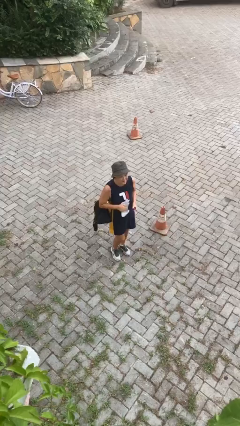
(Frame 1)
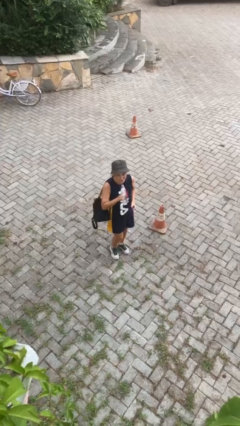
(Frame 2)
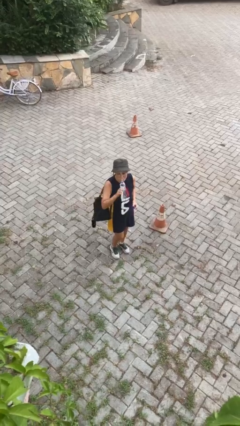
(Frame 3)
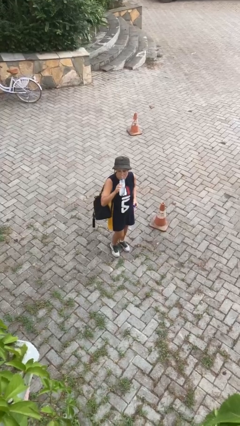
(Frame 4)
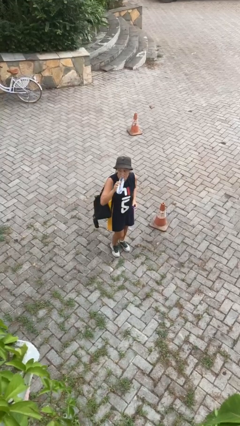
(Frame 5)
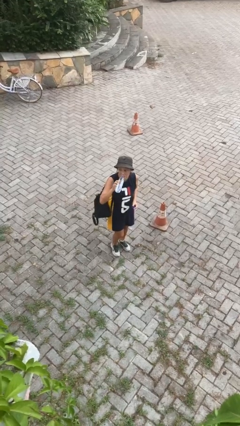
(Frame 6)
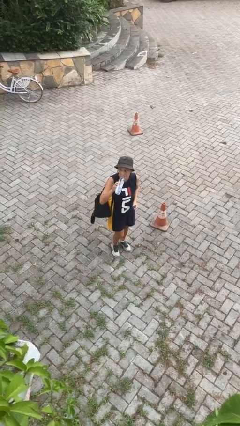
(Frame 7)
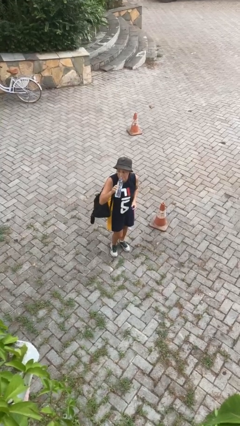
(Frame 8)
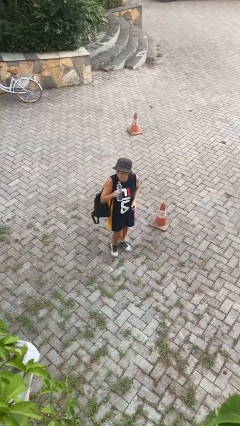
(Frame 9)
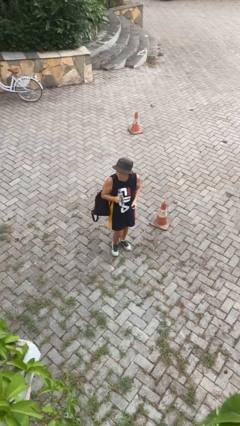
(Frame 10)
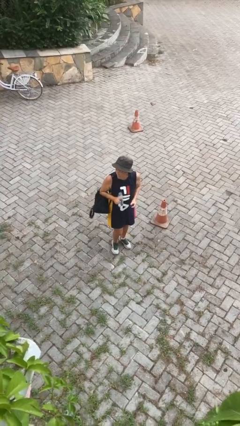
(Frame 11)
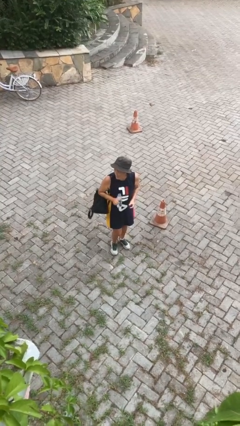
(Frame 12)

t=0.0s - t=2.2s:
person drinks from bottle

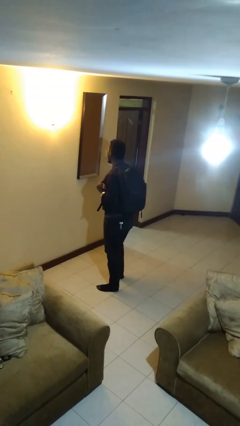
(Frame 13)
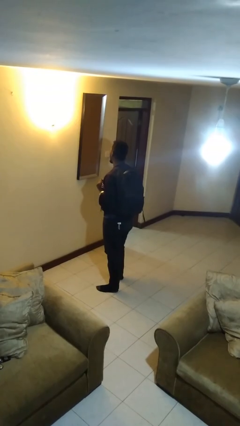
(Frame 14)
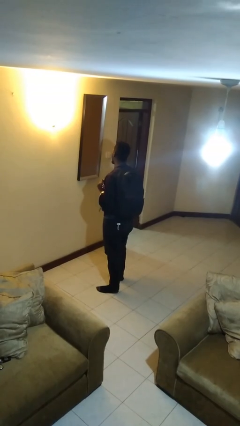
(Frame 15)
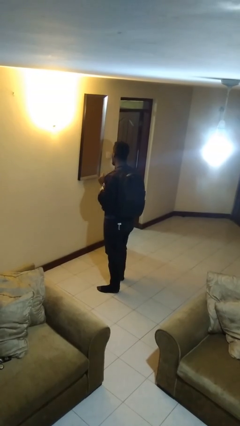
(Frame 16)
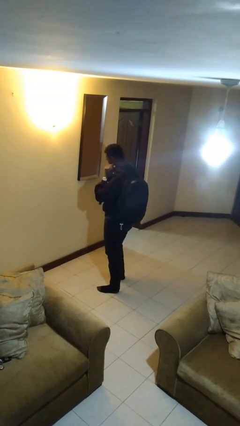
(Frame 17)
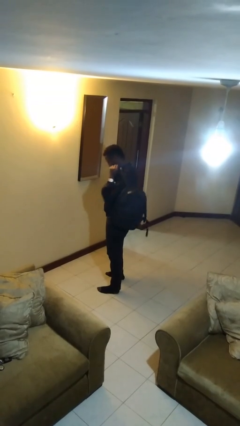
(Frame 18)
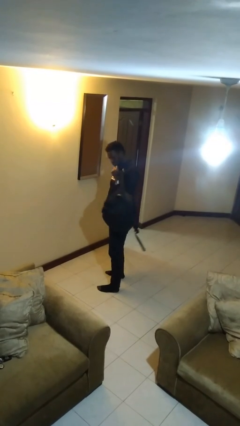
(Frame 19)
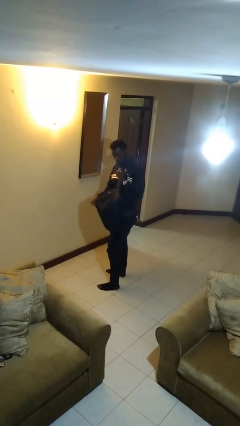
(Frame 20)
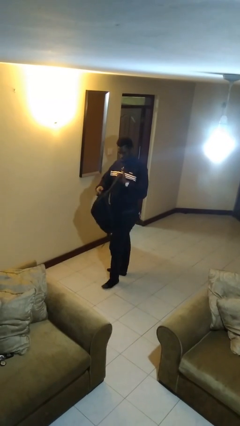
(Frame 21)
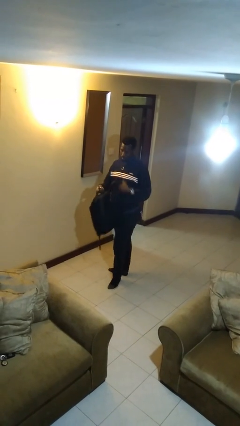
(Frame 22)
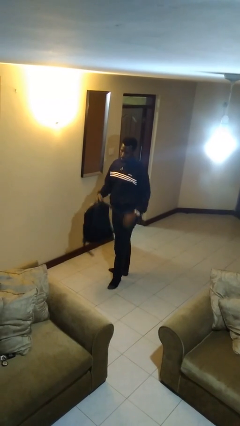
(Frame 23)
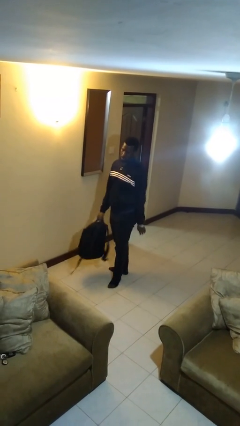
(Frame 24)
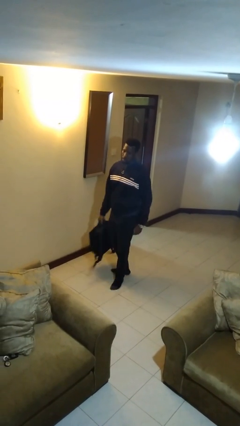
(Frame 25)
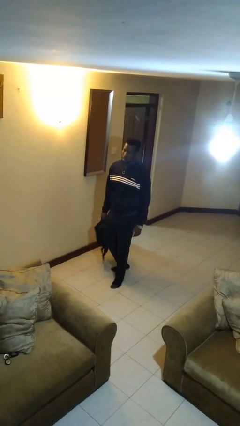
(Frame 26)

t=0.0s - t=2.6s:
person takes off backpack

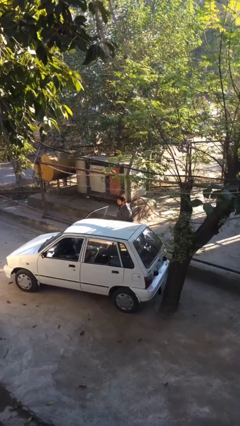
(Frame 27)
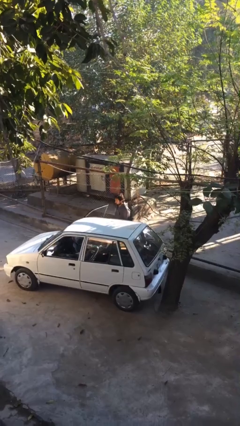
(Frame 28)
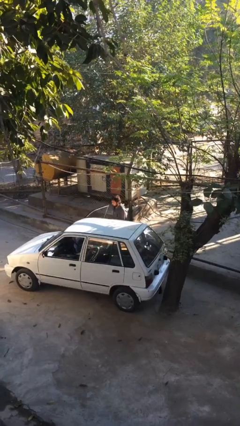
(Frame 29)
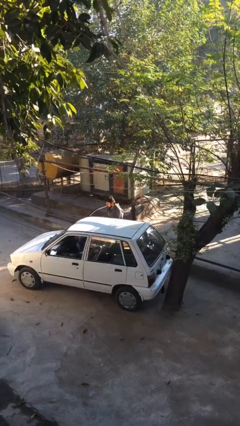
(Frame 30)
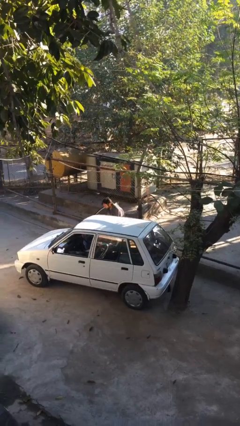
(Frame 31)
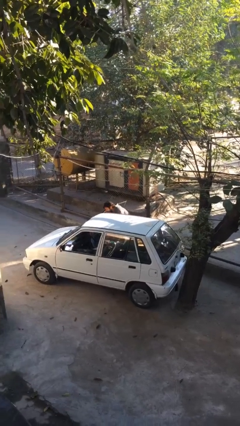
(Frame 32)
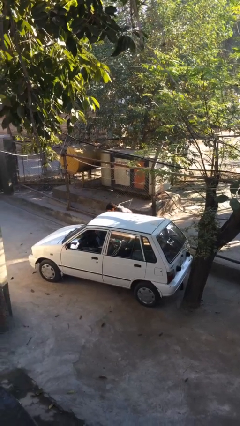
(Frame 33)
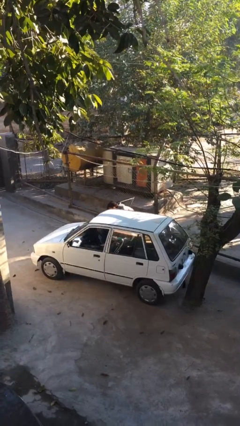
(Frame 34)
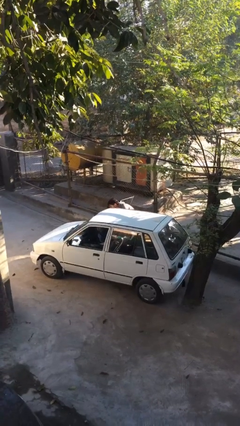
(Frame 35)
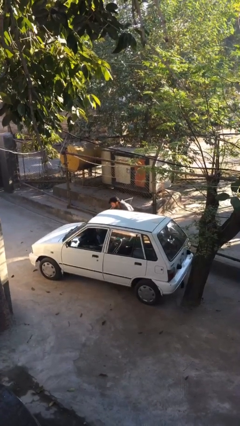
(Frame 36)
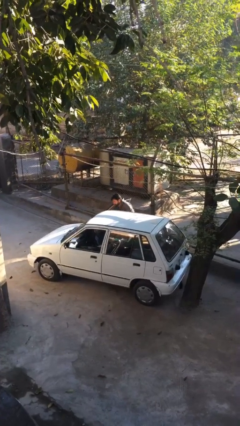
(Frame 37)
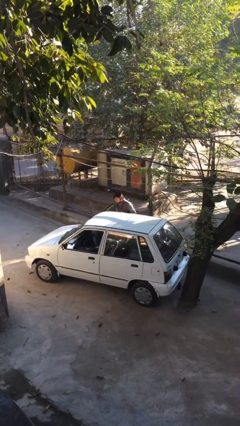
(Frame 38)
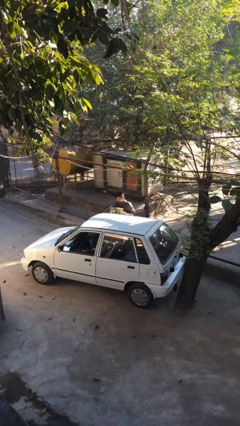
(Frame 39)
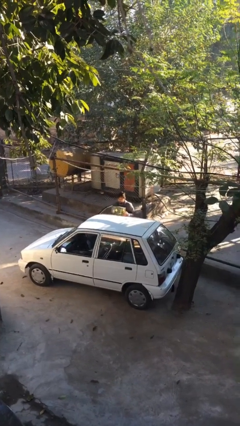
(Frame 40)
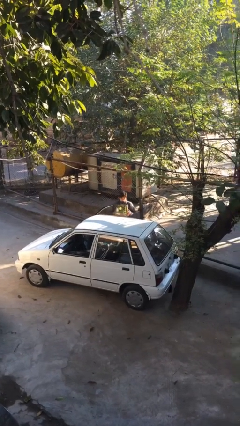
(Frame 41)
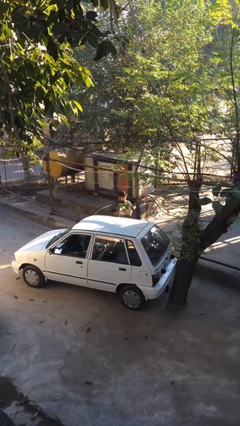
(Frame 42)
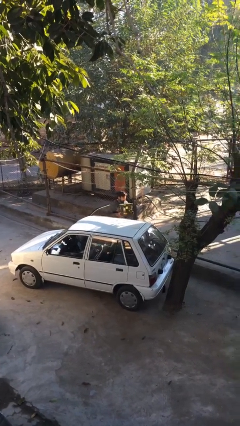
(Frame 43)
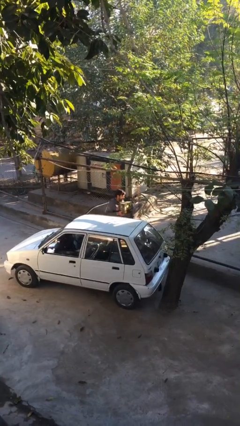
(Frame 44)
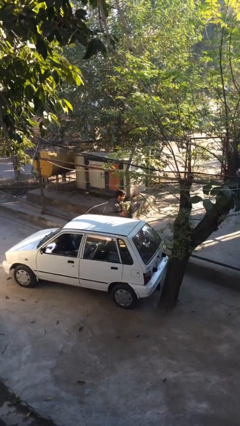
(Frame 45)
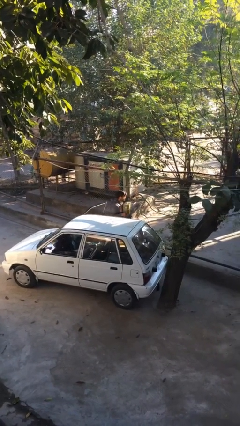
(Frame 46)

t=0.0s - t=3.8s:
person unloads car

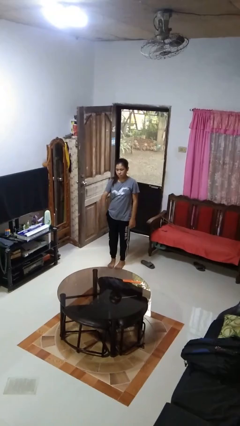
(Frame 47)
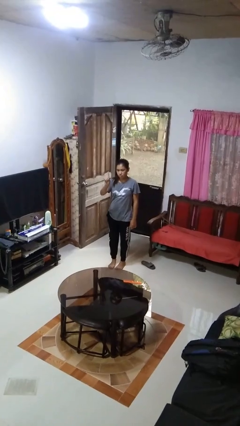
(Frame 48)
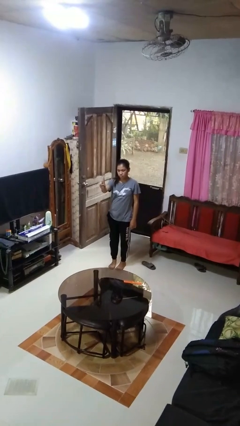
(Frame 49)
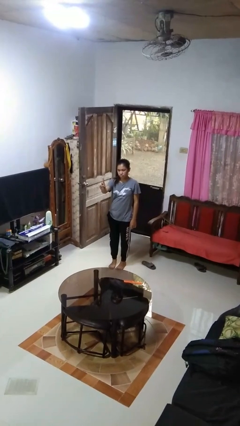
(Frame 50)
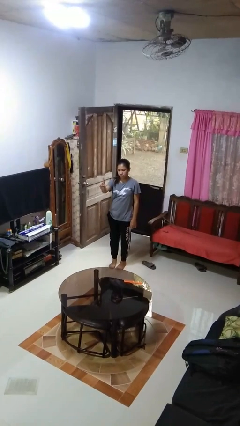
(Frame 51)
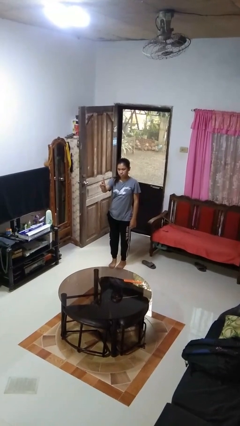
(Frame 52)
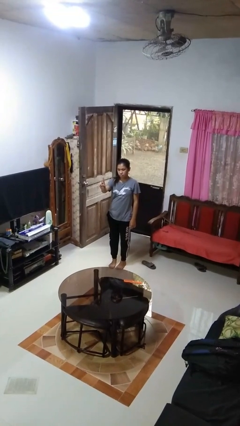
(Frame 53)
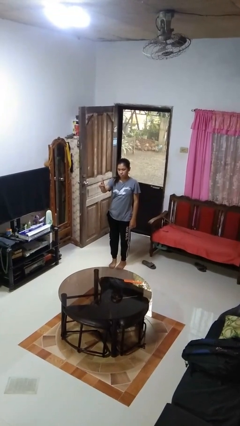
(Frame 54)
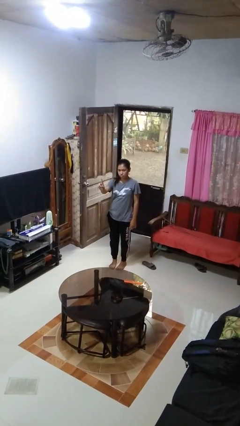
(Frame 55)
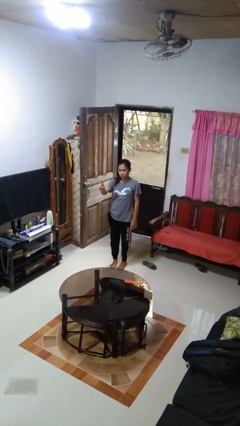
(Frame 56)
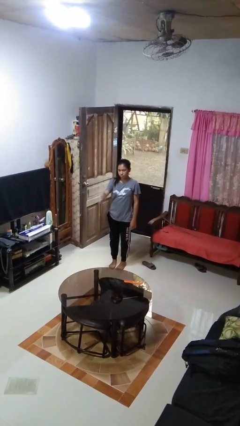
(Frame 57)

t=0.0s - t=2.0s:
person gestures number one

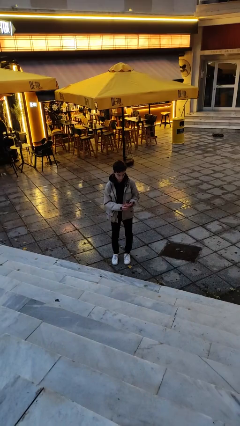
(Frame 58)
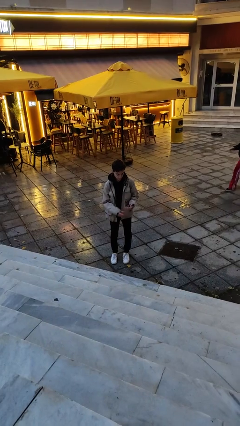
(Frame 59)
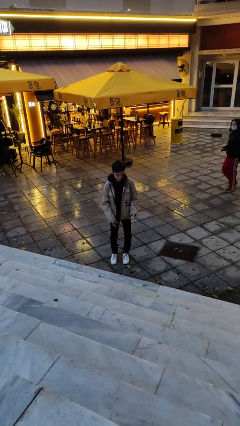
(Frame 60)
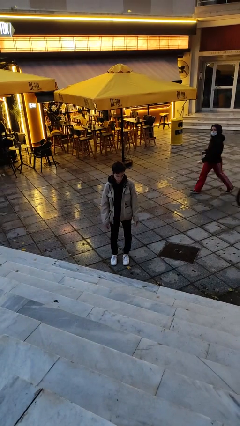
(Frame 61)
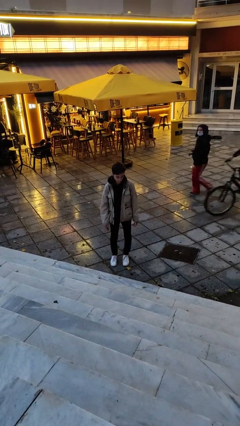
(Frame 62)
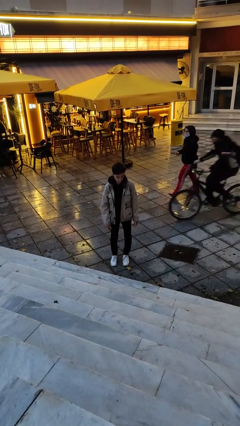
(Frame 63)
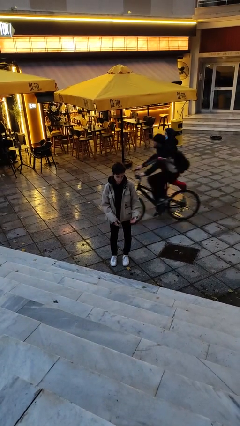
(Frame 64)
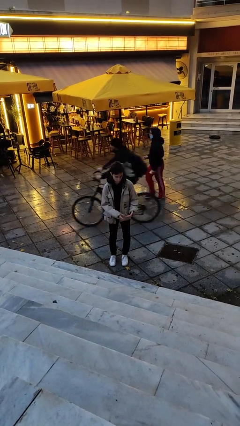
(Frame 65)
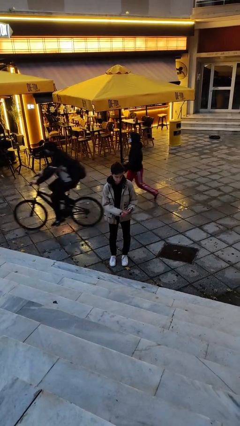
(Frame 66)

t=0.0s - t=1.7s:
person puts on ring

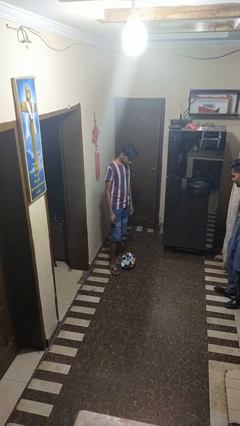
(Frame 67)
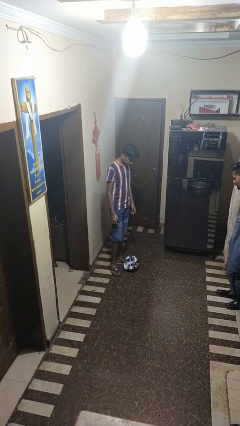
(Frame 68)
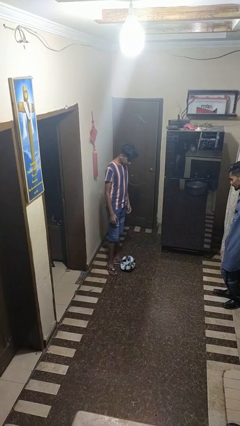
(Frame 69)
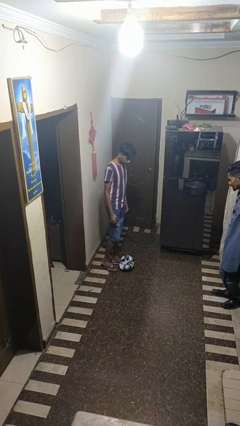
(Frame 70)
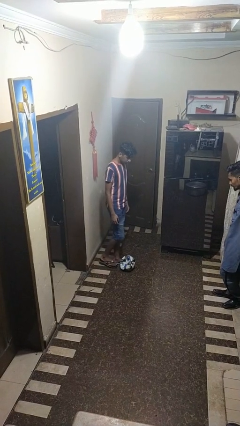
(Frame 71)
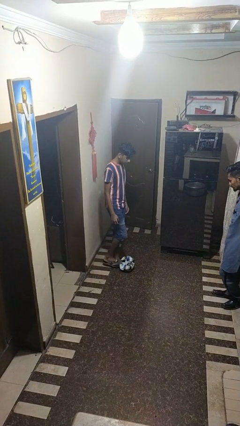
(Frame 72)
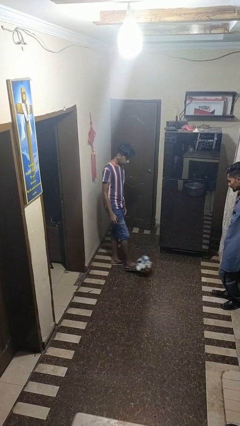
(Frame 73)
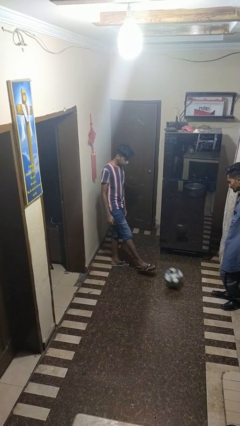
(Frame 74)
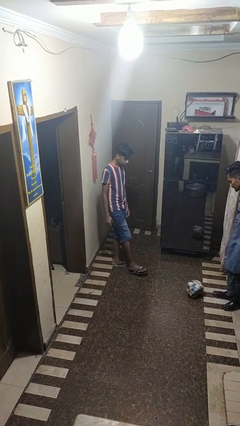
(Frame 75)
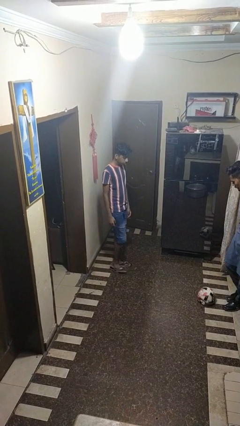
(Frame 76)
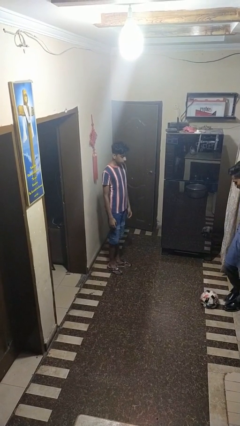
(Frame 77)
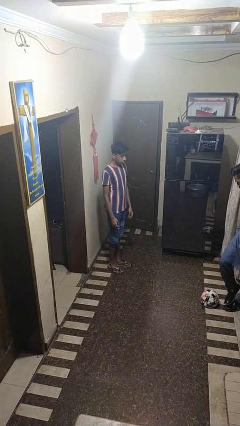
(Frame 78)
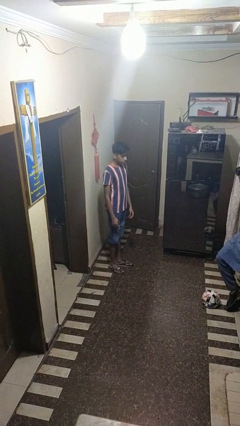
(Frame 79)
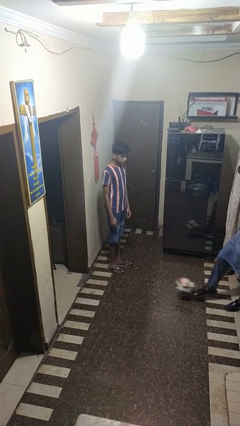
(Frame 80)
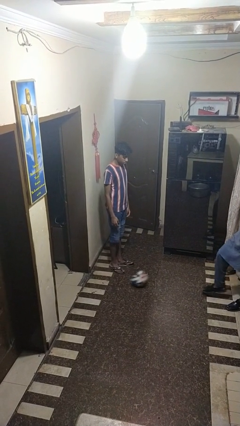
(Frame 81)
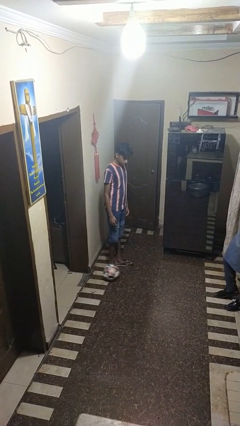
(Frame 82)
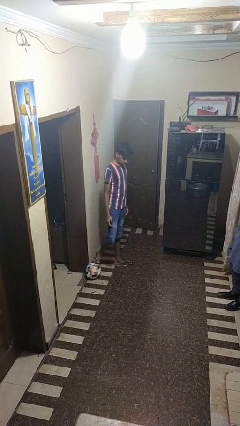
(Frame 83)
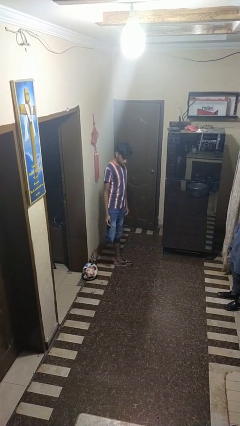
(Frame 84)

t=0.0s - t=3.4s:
person kicks object to person

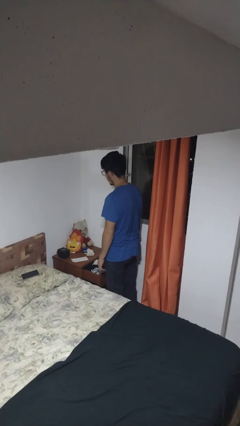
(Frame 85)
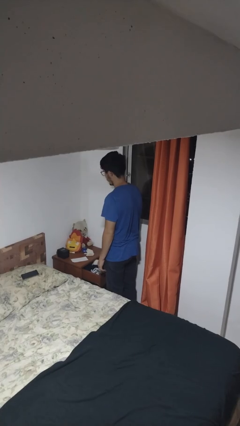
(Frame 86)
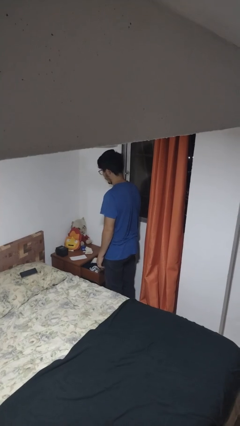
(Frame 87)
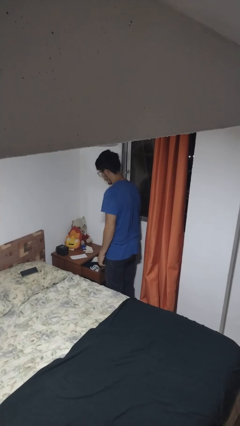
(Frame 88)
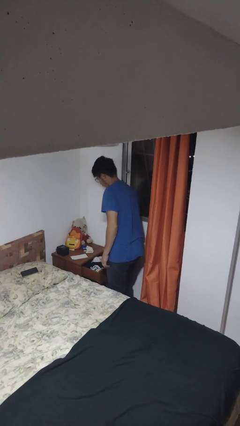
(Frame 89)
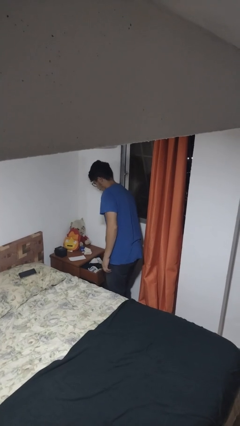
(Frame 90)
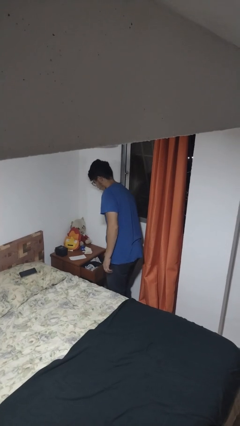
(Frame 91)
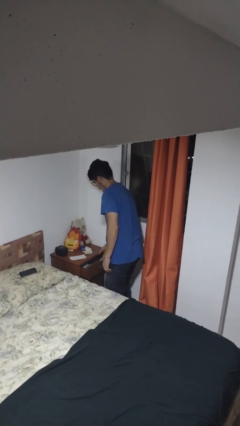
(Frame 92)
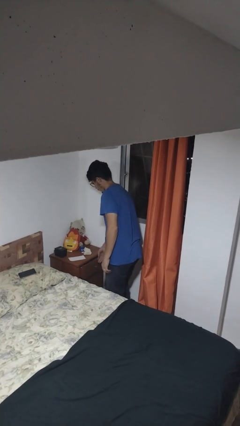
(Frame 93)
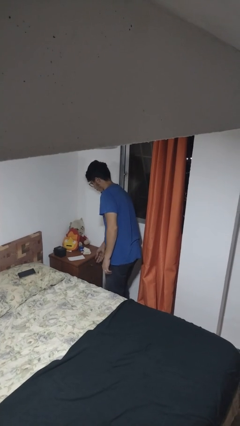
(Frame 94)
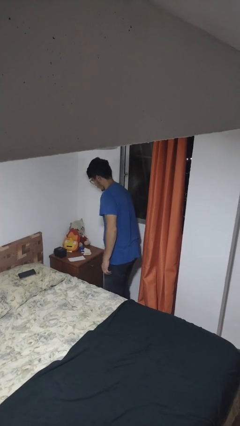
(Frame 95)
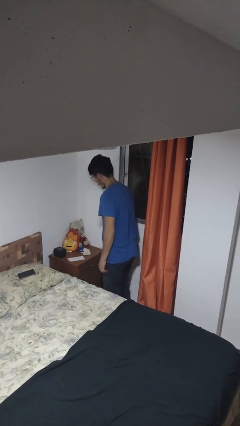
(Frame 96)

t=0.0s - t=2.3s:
person closes dresser drawer
